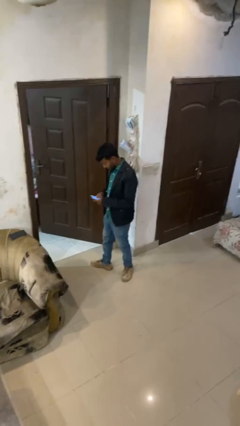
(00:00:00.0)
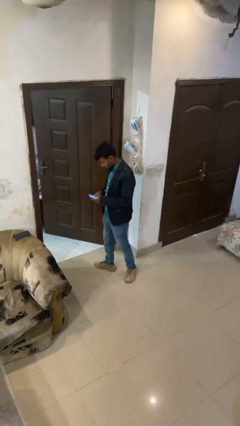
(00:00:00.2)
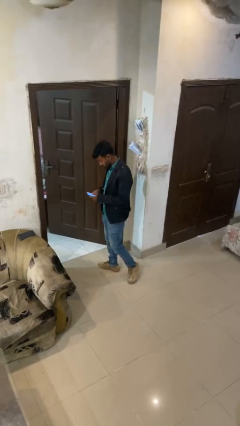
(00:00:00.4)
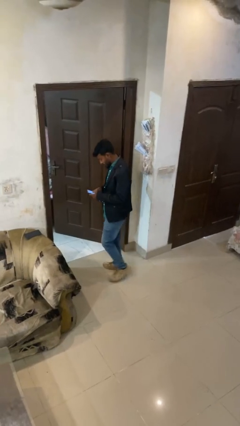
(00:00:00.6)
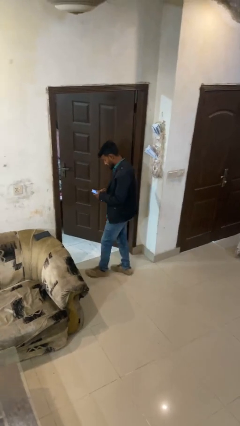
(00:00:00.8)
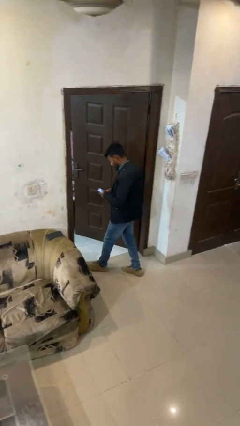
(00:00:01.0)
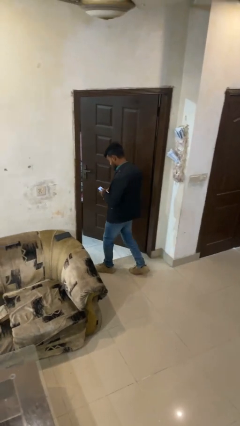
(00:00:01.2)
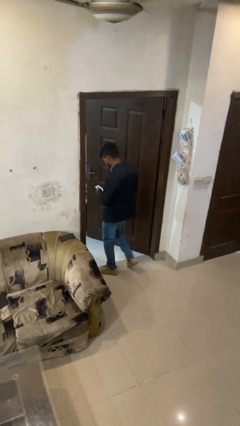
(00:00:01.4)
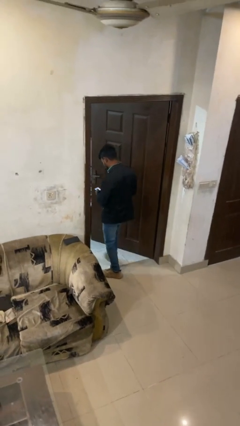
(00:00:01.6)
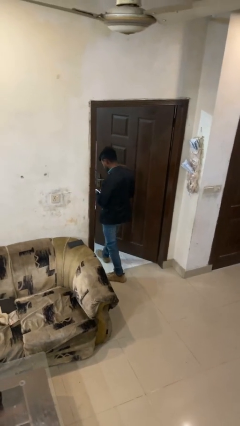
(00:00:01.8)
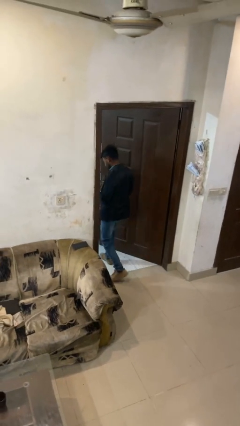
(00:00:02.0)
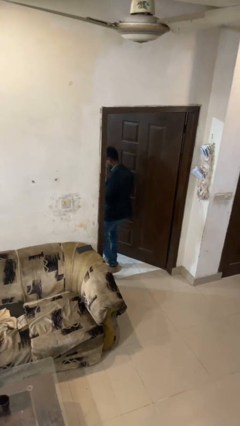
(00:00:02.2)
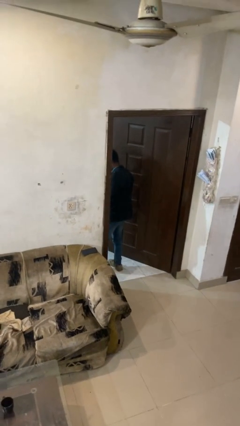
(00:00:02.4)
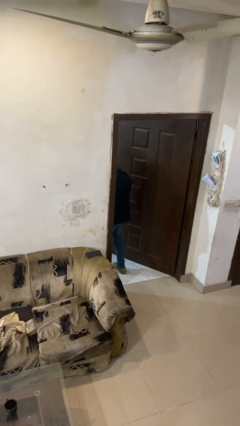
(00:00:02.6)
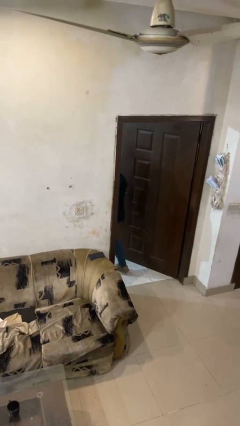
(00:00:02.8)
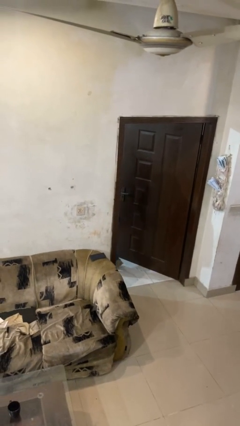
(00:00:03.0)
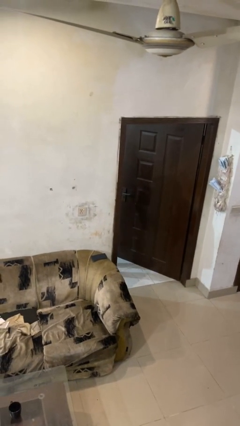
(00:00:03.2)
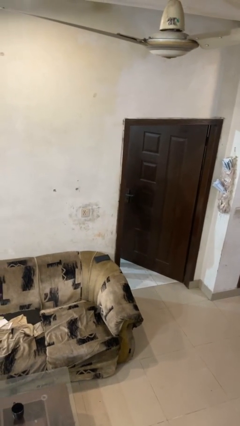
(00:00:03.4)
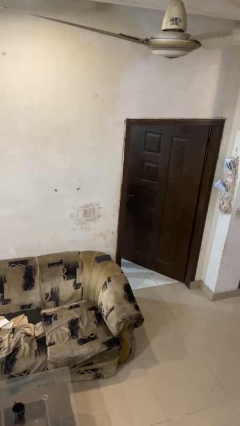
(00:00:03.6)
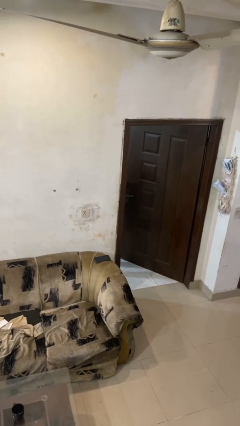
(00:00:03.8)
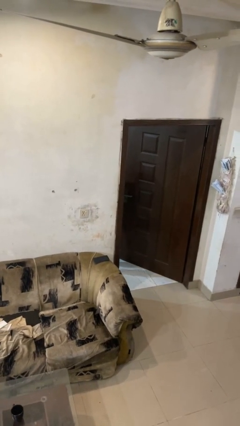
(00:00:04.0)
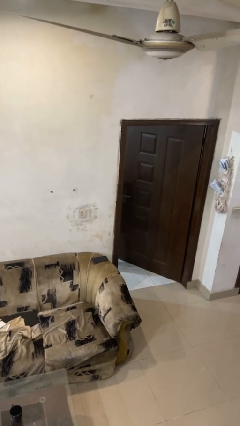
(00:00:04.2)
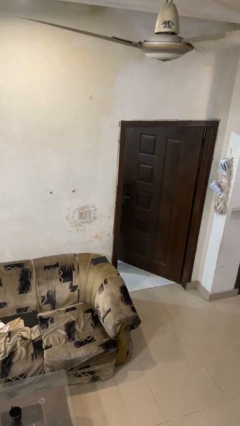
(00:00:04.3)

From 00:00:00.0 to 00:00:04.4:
person exits scene through structure

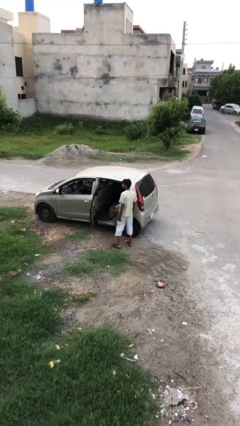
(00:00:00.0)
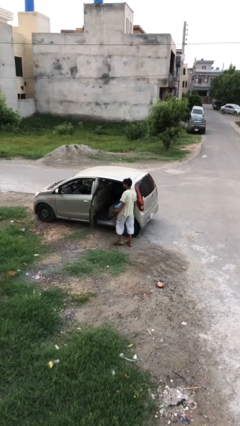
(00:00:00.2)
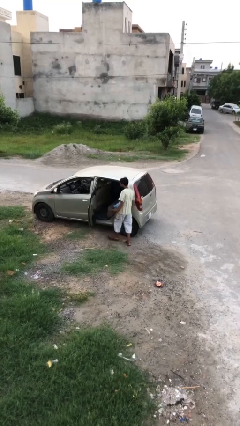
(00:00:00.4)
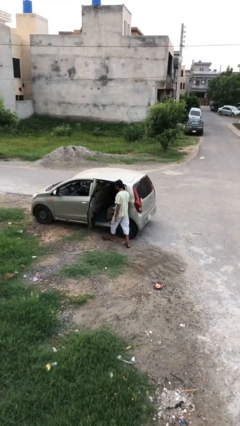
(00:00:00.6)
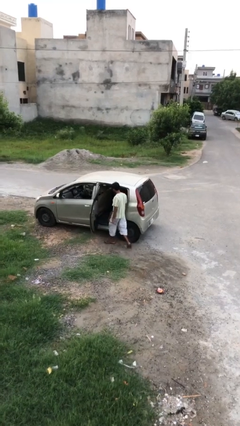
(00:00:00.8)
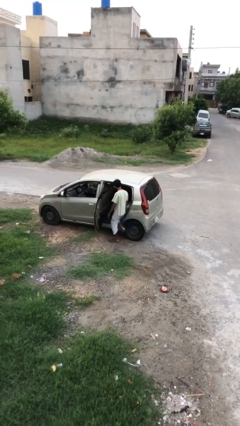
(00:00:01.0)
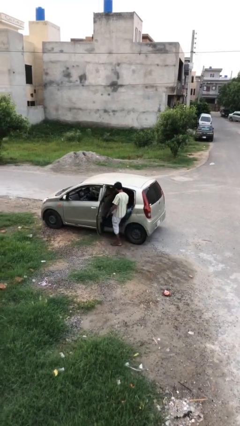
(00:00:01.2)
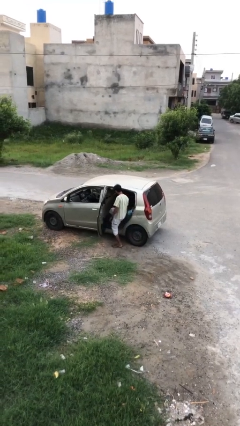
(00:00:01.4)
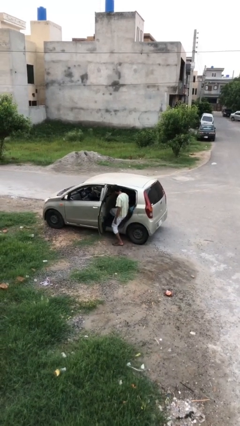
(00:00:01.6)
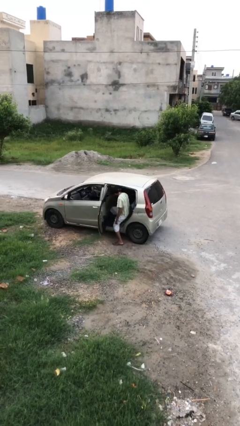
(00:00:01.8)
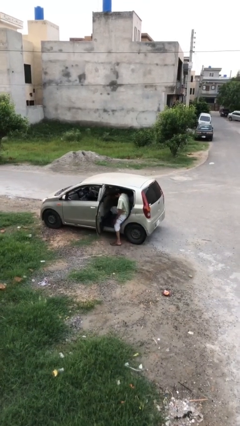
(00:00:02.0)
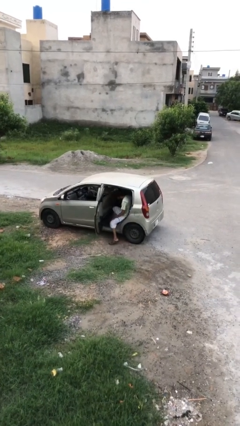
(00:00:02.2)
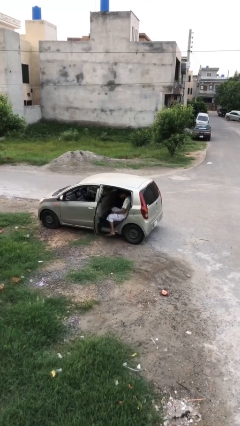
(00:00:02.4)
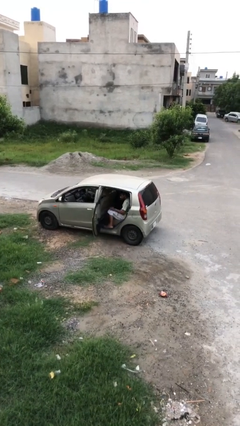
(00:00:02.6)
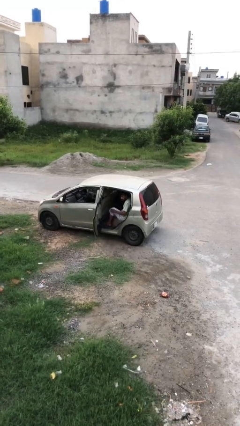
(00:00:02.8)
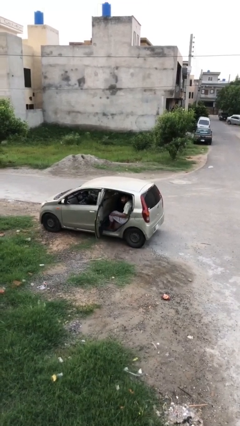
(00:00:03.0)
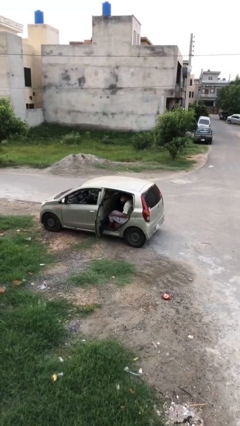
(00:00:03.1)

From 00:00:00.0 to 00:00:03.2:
person enters car

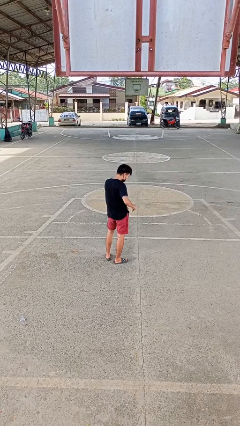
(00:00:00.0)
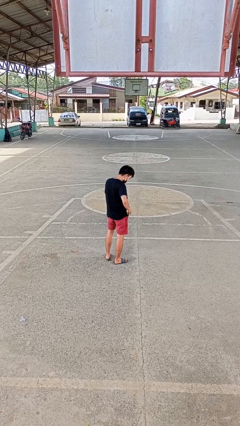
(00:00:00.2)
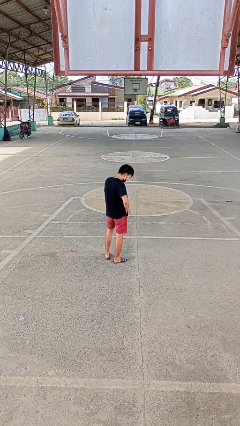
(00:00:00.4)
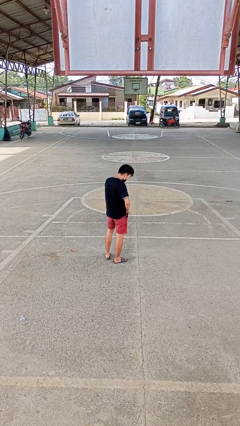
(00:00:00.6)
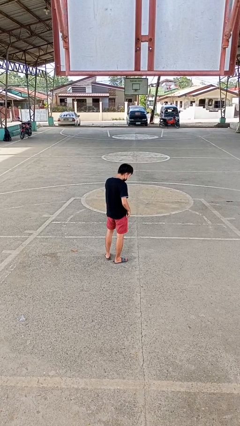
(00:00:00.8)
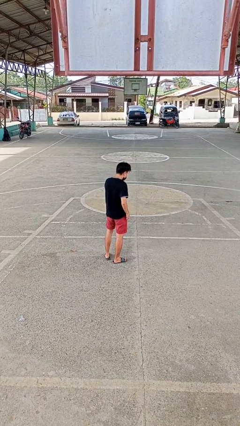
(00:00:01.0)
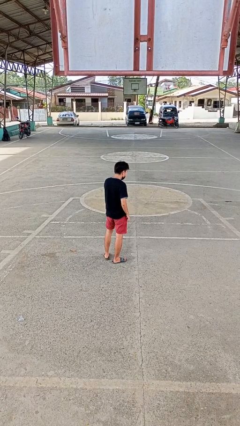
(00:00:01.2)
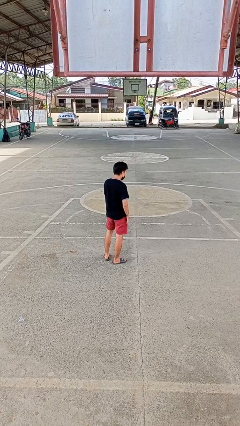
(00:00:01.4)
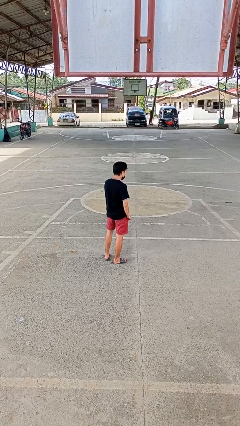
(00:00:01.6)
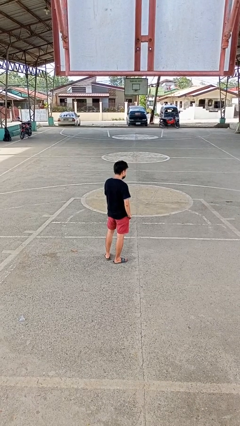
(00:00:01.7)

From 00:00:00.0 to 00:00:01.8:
person puts phone into pocket

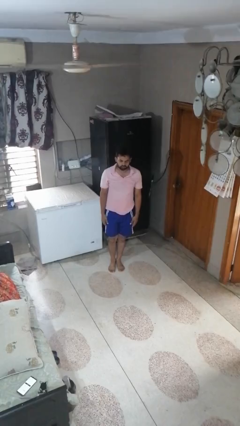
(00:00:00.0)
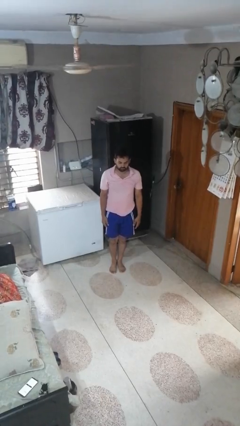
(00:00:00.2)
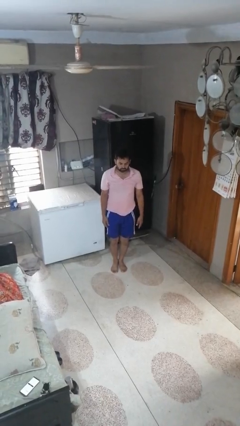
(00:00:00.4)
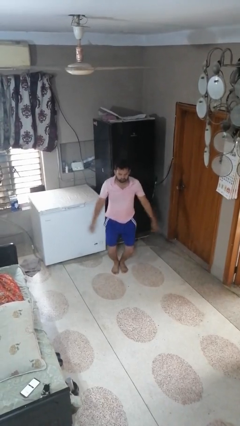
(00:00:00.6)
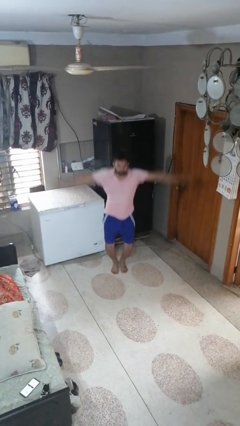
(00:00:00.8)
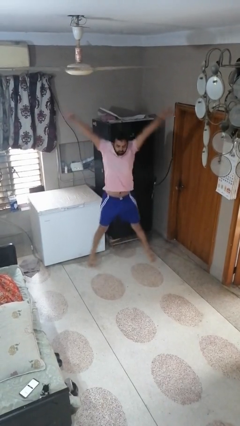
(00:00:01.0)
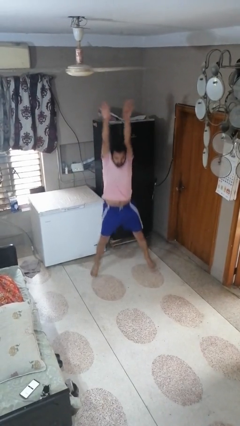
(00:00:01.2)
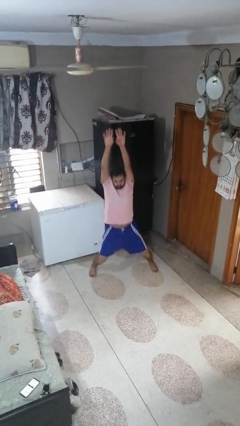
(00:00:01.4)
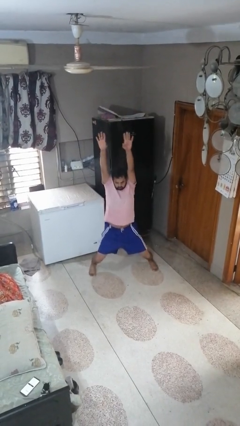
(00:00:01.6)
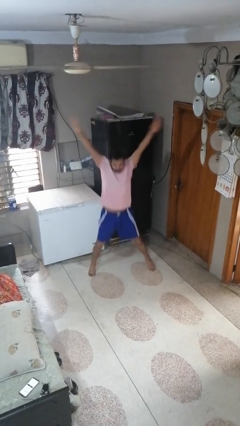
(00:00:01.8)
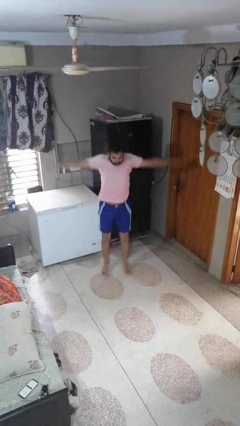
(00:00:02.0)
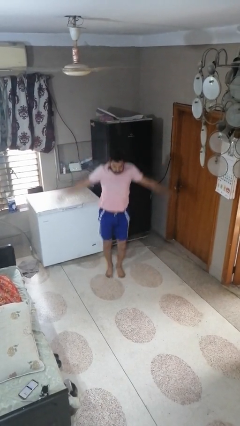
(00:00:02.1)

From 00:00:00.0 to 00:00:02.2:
person exercises with jumping jacks

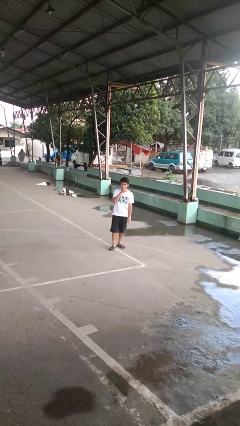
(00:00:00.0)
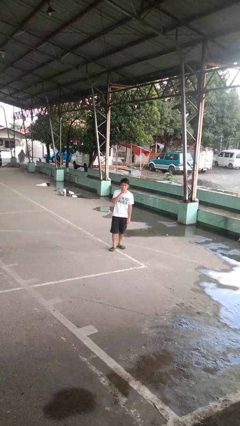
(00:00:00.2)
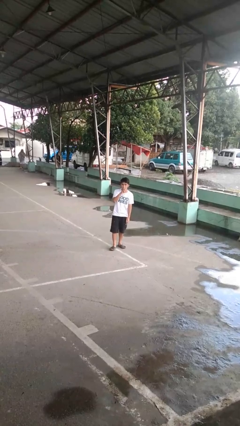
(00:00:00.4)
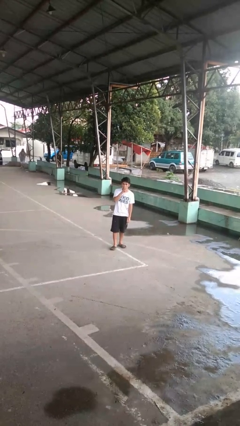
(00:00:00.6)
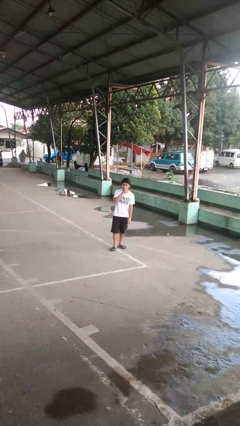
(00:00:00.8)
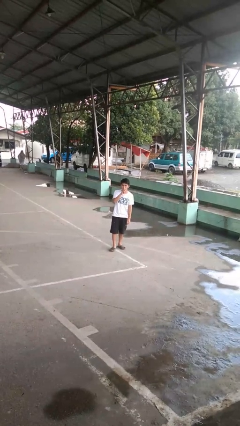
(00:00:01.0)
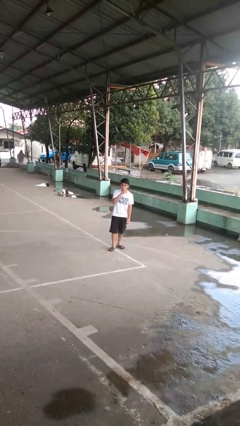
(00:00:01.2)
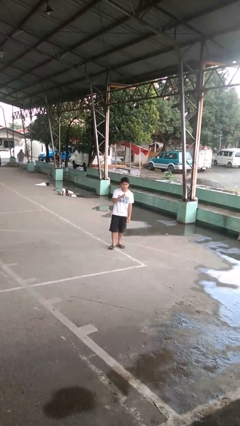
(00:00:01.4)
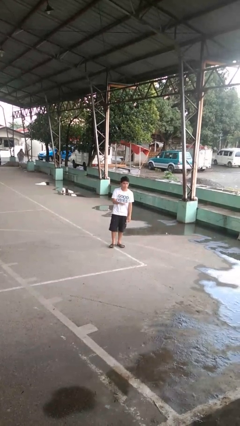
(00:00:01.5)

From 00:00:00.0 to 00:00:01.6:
person gestures be quiet

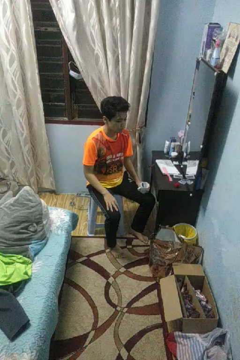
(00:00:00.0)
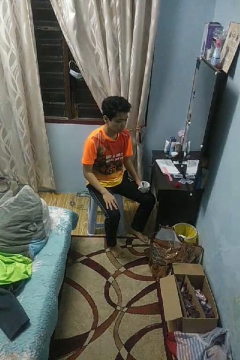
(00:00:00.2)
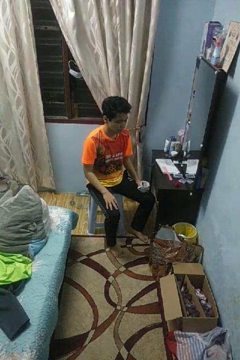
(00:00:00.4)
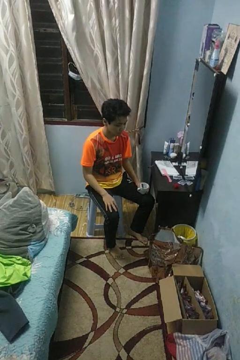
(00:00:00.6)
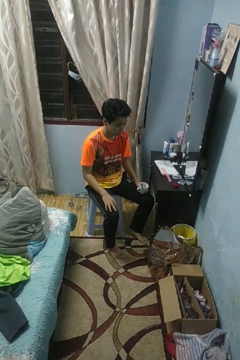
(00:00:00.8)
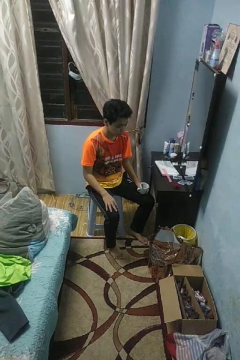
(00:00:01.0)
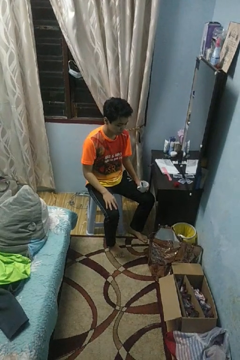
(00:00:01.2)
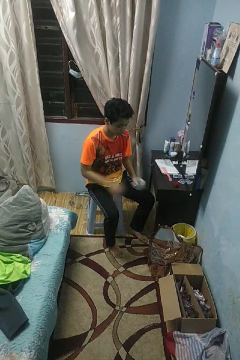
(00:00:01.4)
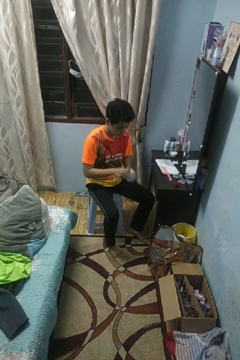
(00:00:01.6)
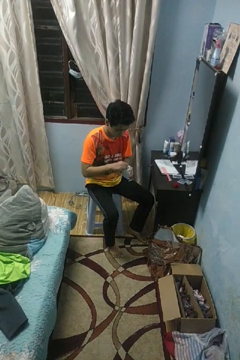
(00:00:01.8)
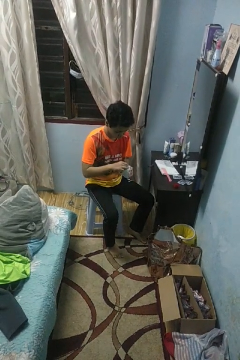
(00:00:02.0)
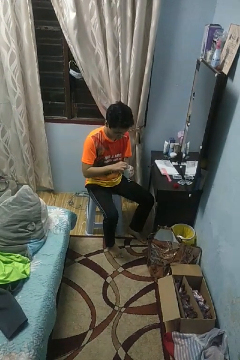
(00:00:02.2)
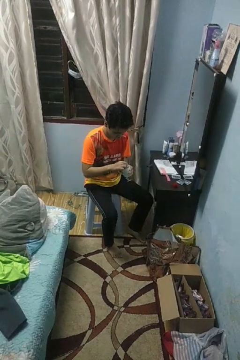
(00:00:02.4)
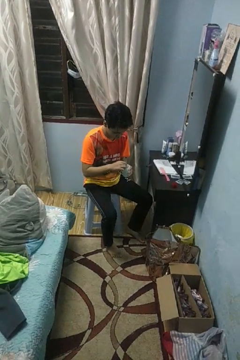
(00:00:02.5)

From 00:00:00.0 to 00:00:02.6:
person stirs mug

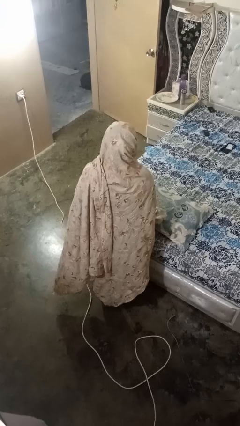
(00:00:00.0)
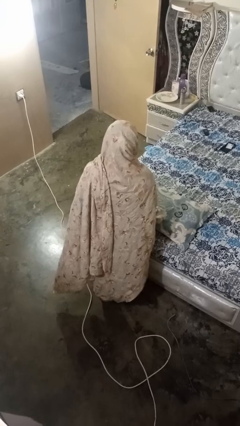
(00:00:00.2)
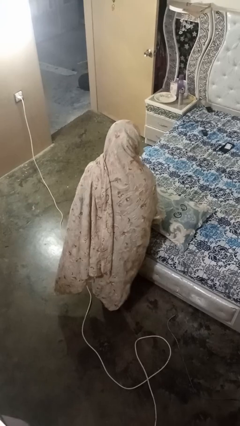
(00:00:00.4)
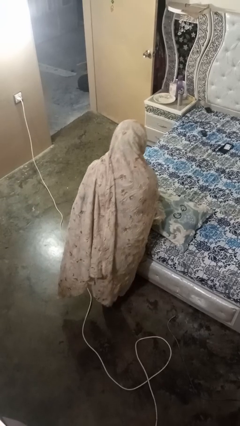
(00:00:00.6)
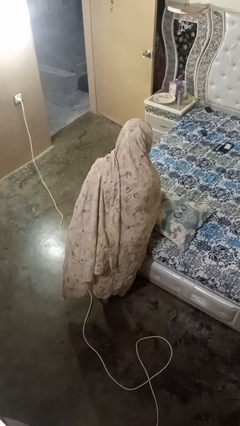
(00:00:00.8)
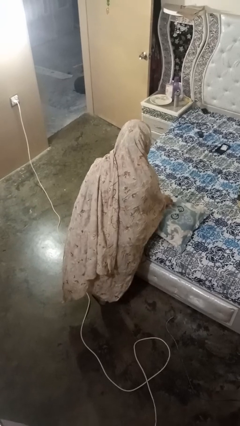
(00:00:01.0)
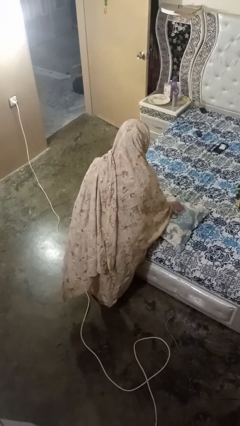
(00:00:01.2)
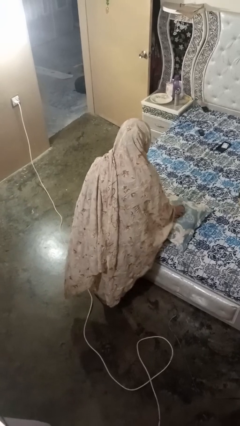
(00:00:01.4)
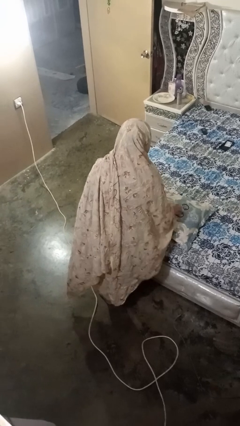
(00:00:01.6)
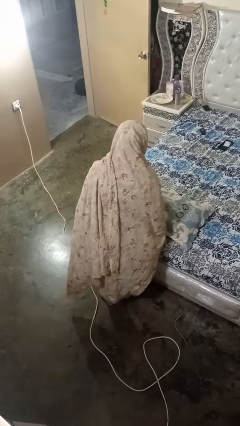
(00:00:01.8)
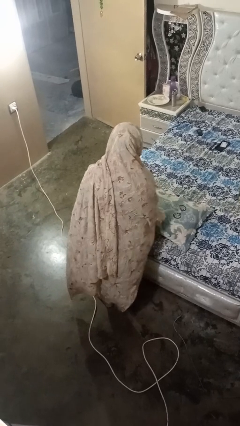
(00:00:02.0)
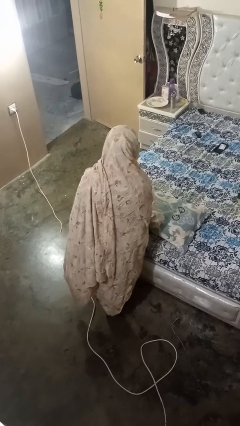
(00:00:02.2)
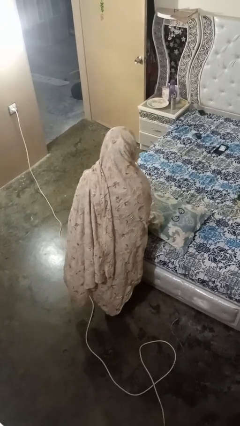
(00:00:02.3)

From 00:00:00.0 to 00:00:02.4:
person taps object with finger
